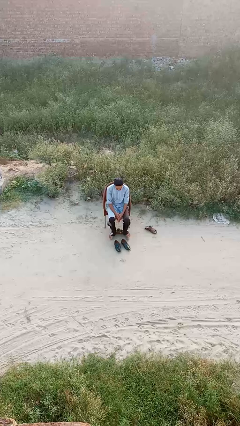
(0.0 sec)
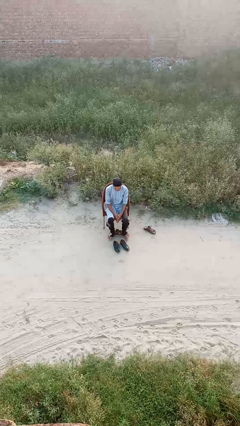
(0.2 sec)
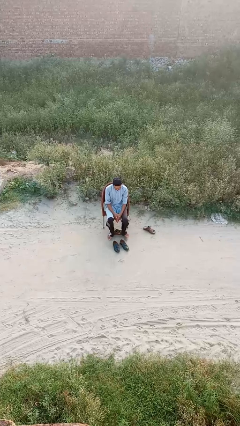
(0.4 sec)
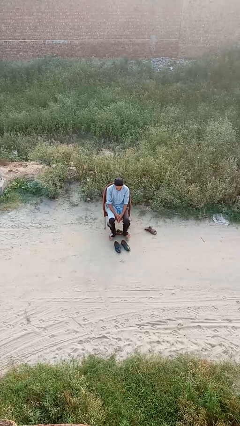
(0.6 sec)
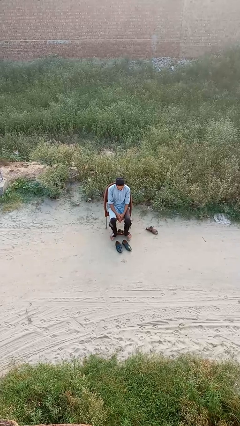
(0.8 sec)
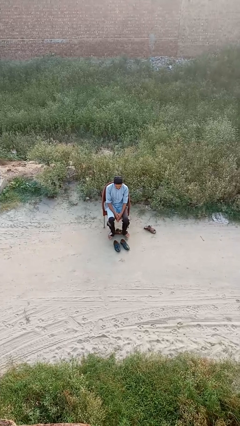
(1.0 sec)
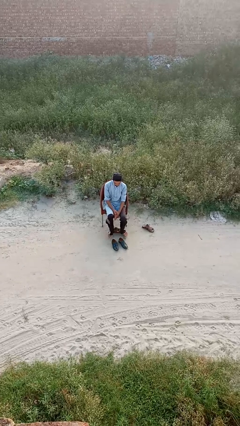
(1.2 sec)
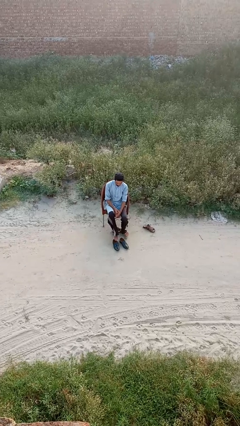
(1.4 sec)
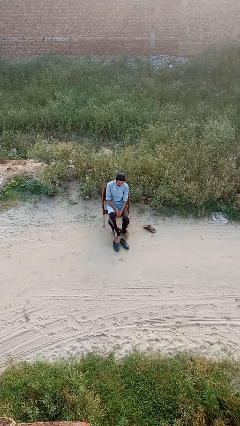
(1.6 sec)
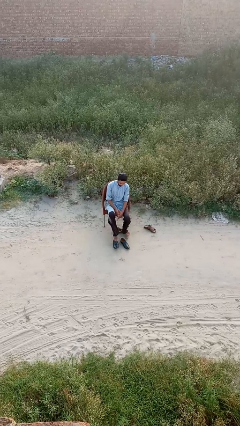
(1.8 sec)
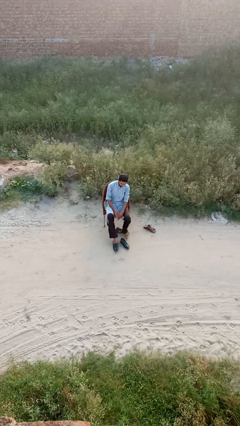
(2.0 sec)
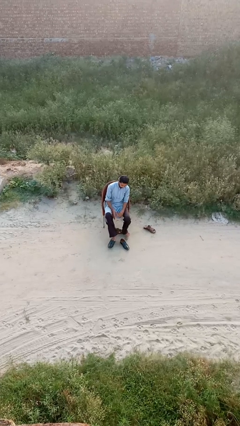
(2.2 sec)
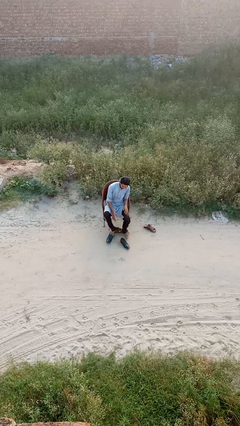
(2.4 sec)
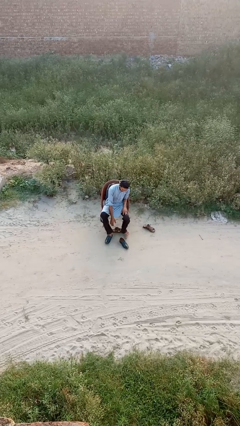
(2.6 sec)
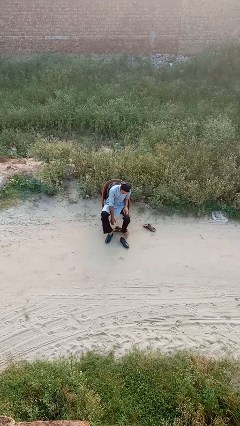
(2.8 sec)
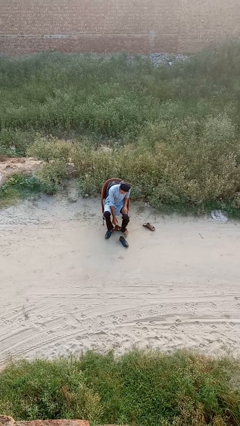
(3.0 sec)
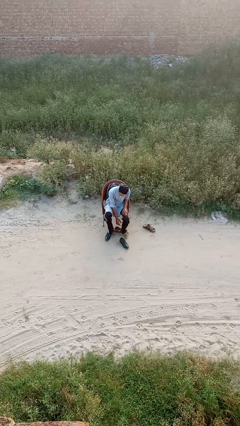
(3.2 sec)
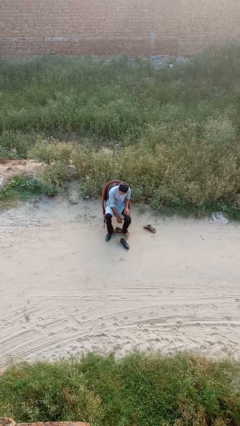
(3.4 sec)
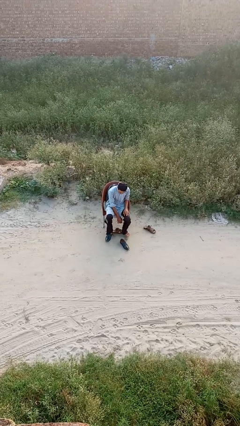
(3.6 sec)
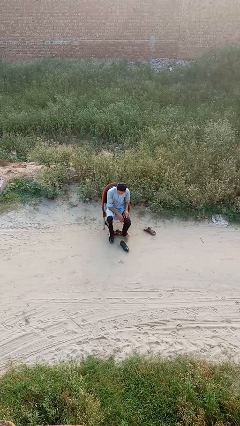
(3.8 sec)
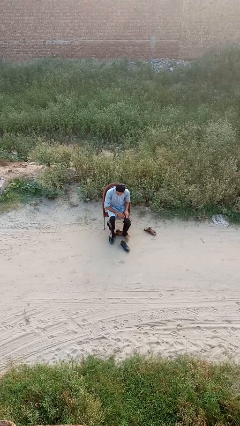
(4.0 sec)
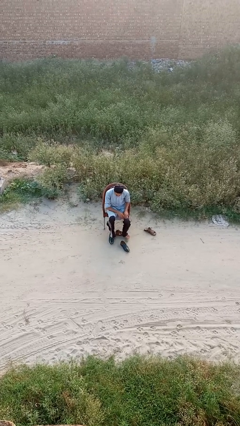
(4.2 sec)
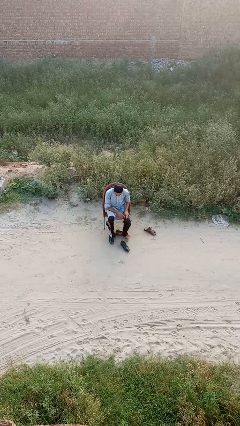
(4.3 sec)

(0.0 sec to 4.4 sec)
person puts on shoes

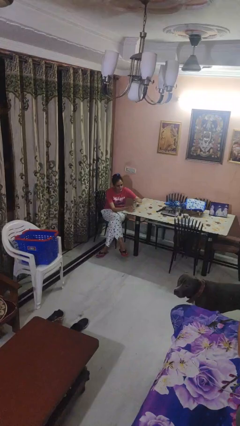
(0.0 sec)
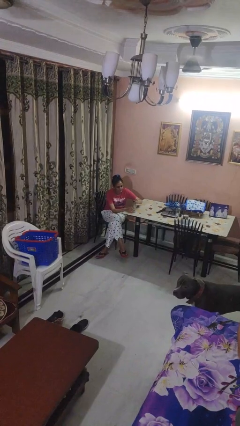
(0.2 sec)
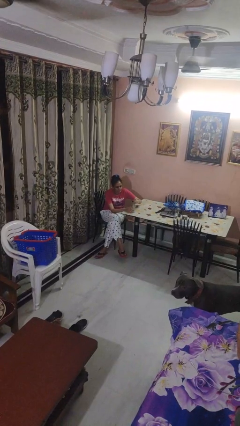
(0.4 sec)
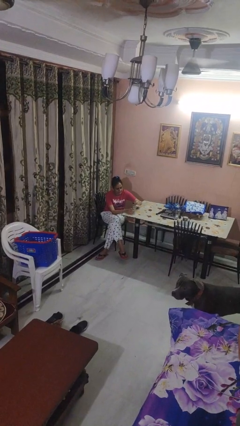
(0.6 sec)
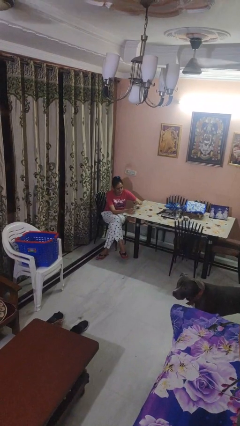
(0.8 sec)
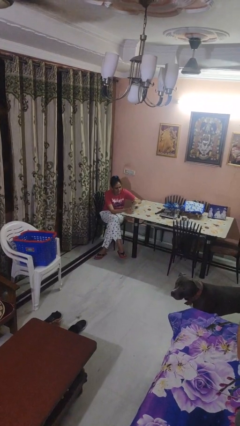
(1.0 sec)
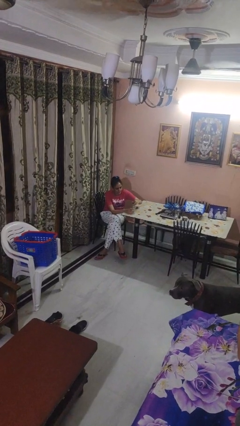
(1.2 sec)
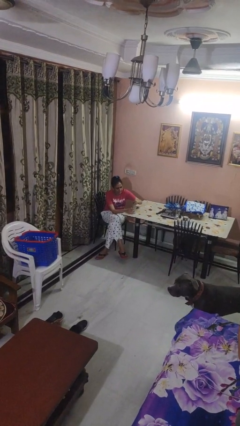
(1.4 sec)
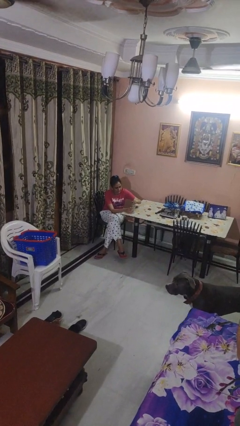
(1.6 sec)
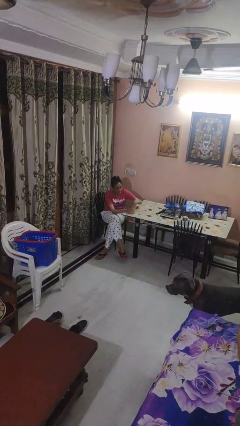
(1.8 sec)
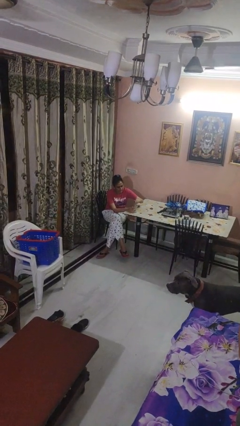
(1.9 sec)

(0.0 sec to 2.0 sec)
person screws lid to bottle

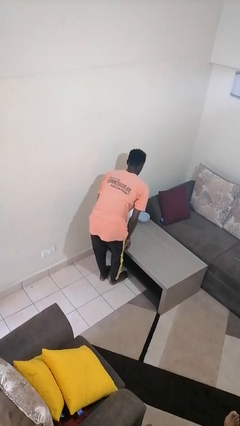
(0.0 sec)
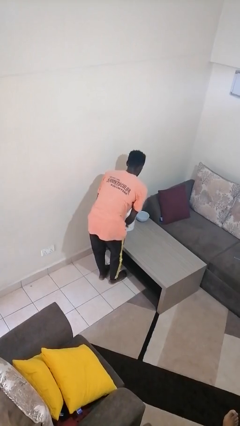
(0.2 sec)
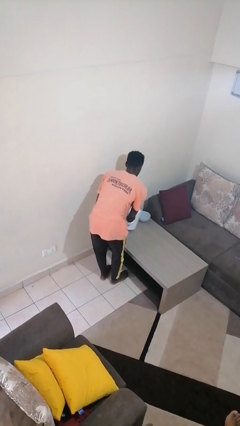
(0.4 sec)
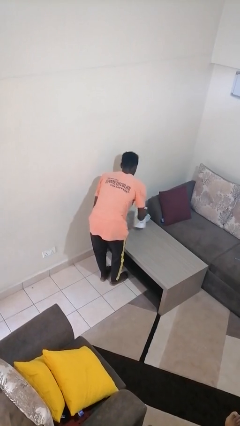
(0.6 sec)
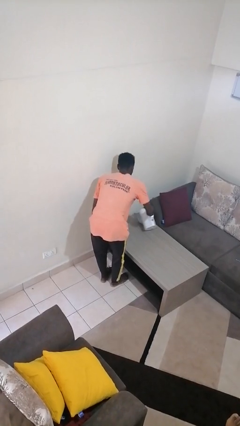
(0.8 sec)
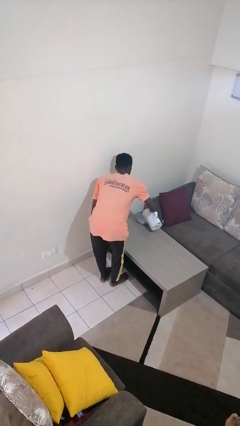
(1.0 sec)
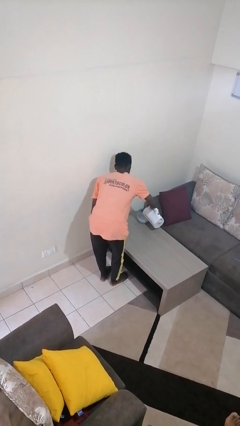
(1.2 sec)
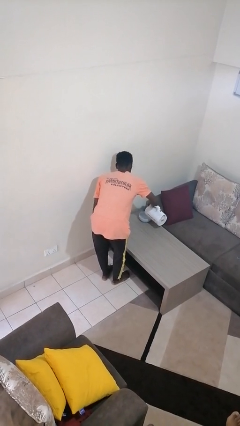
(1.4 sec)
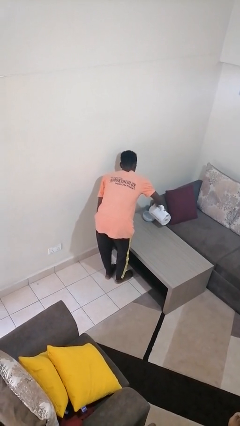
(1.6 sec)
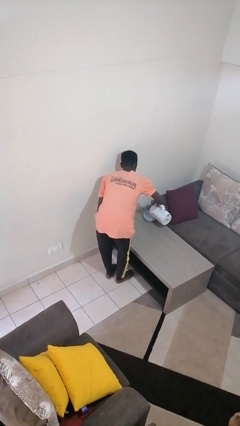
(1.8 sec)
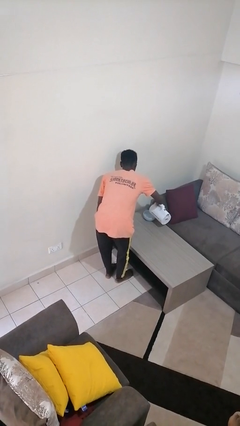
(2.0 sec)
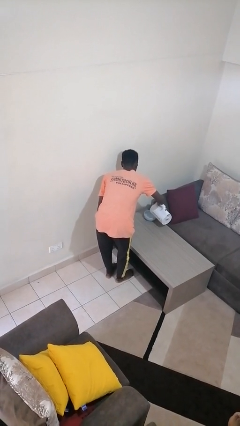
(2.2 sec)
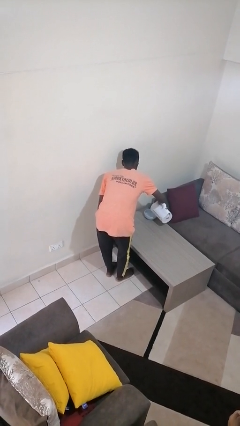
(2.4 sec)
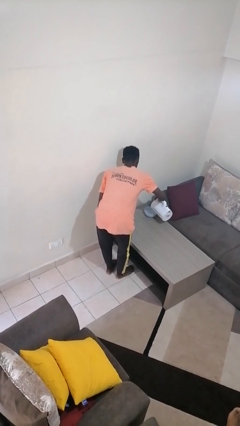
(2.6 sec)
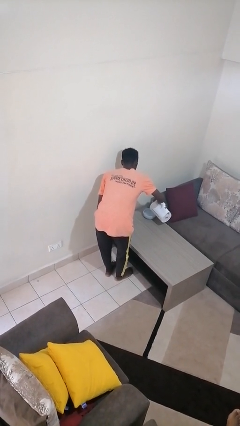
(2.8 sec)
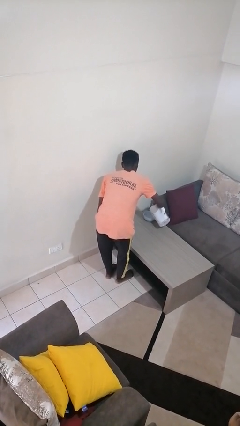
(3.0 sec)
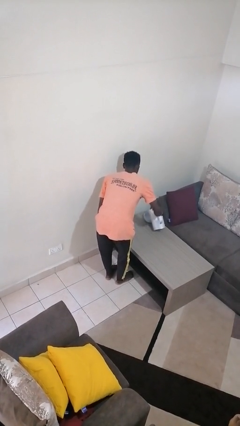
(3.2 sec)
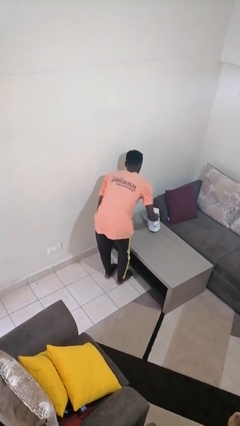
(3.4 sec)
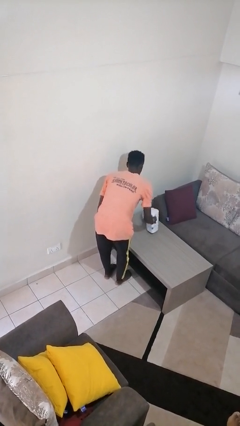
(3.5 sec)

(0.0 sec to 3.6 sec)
person pours into bowl

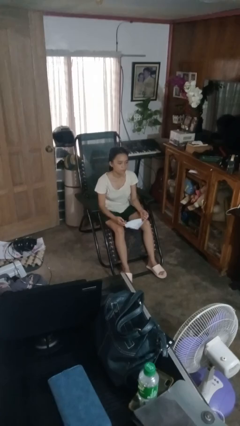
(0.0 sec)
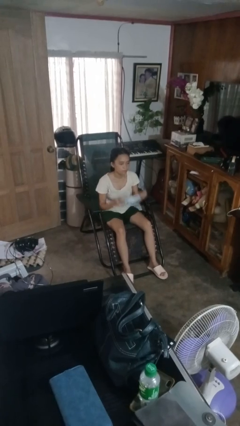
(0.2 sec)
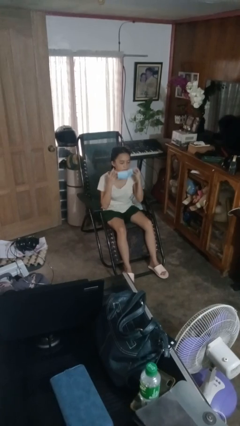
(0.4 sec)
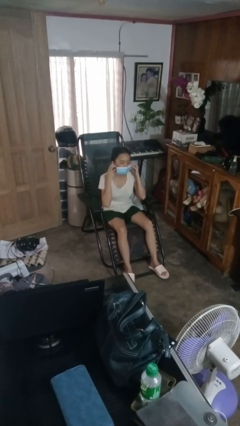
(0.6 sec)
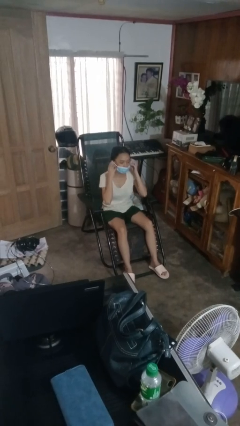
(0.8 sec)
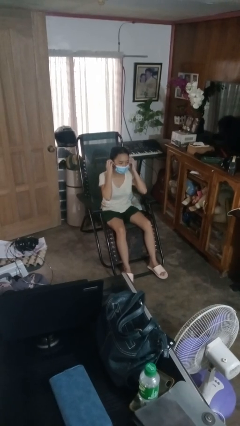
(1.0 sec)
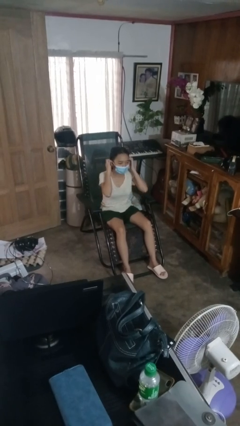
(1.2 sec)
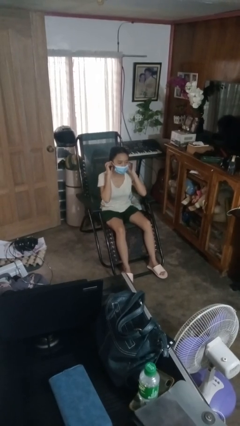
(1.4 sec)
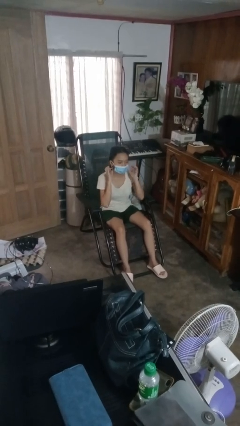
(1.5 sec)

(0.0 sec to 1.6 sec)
person puts on facemask

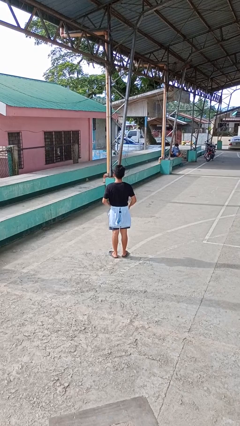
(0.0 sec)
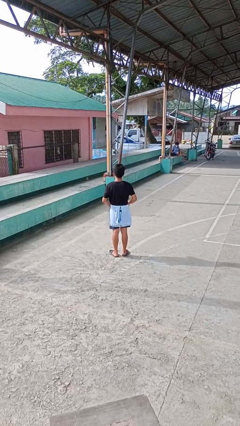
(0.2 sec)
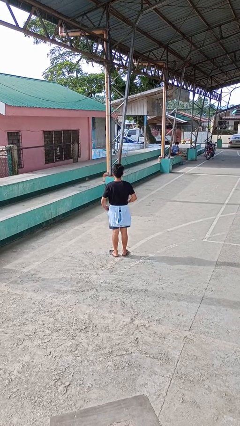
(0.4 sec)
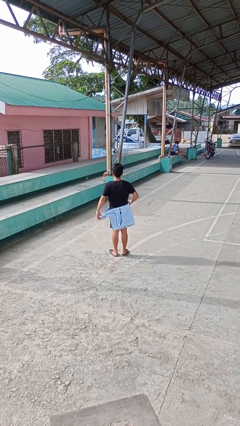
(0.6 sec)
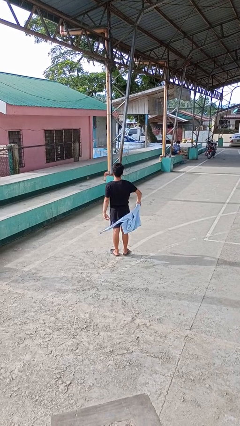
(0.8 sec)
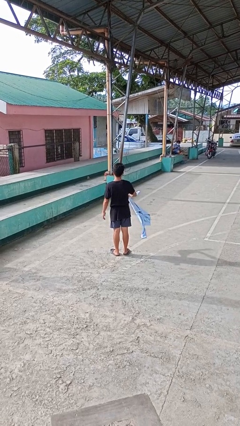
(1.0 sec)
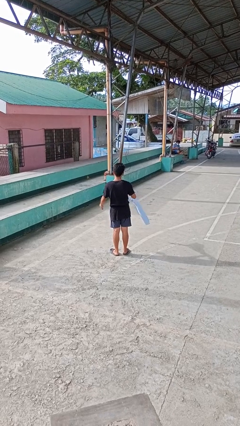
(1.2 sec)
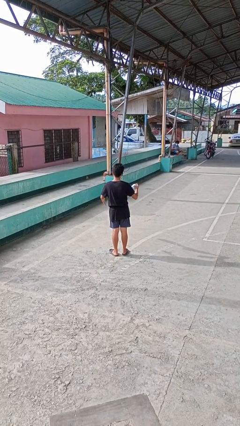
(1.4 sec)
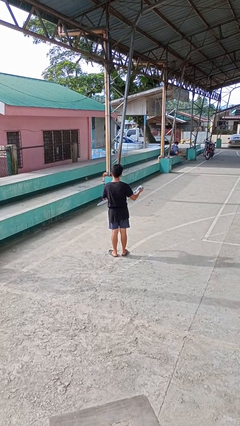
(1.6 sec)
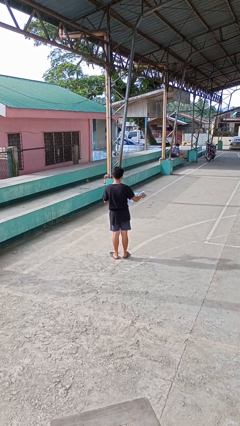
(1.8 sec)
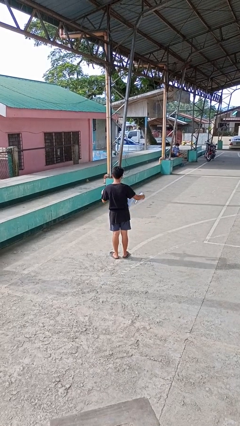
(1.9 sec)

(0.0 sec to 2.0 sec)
person unties jacket around waist

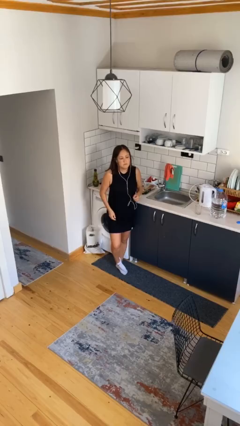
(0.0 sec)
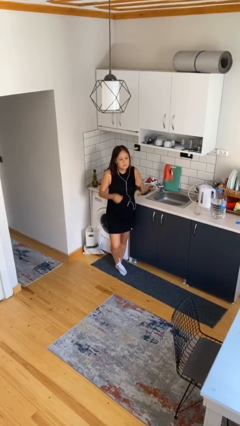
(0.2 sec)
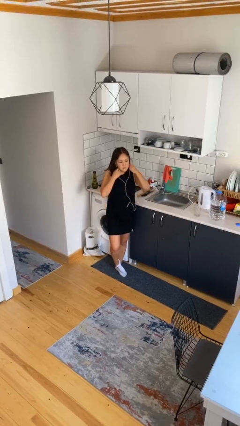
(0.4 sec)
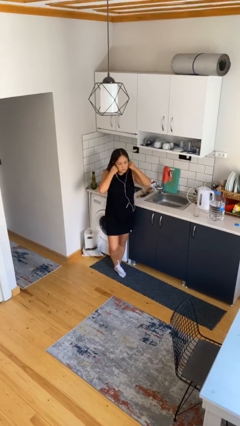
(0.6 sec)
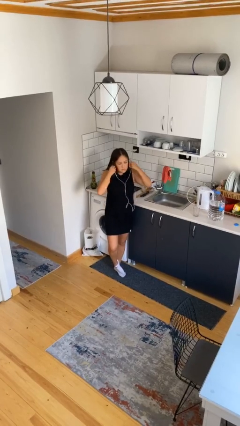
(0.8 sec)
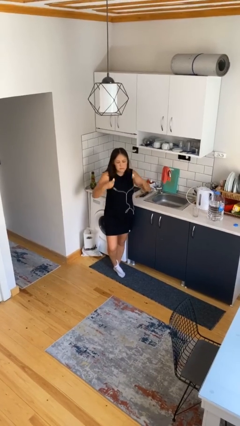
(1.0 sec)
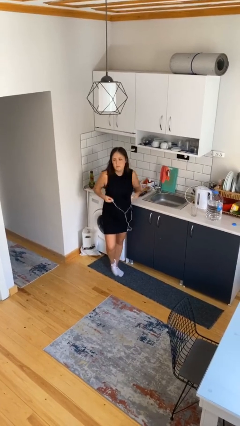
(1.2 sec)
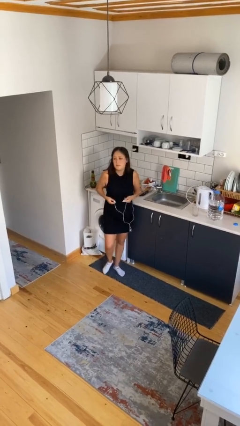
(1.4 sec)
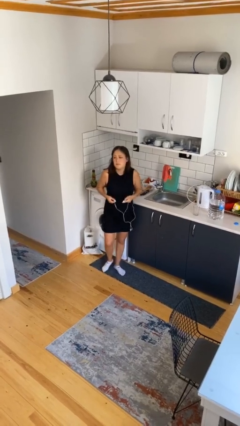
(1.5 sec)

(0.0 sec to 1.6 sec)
person takes off headphones

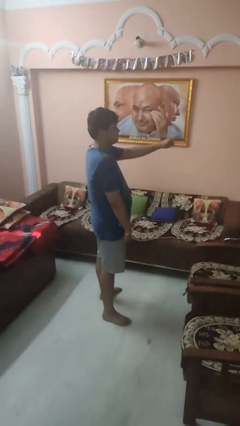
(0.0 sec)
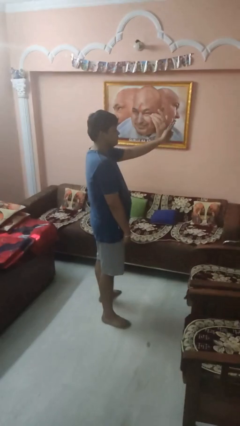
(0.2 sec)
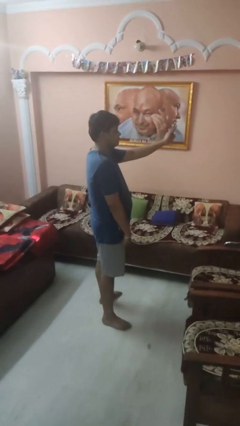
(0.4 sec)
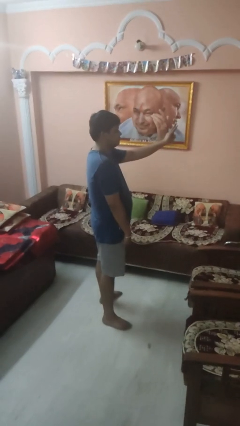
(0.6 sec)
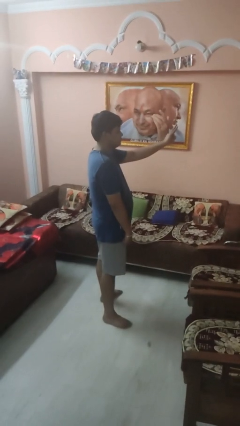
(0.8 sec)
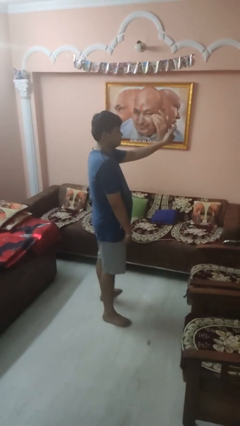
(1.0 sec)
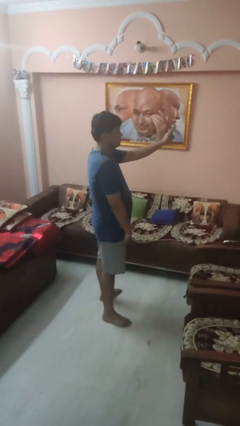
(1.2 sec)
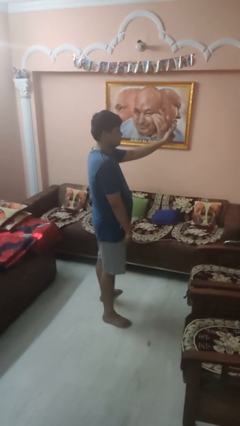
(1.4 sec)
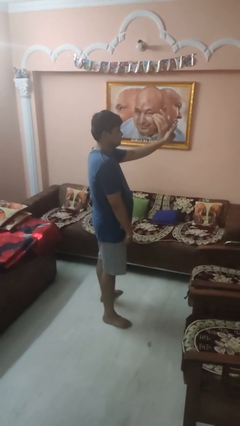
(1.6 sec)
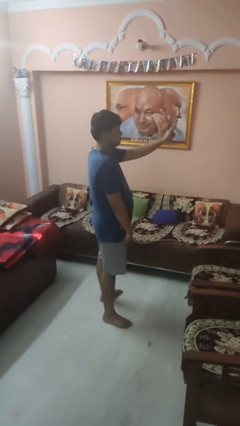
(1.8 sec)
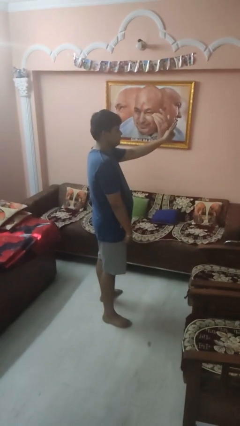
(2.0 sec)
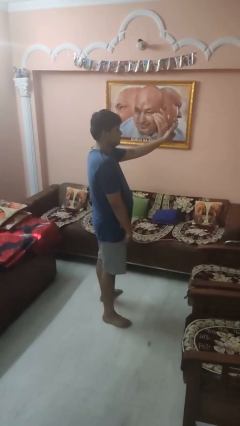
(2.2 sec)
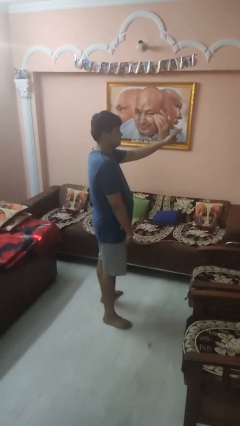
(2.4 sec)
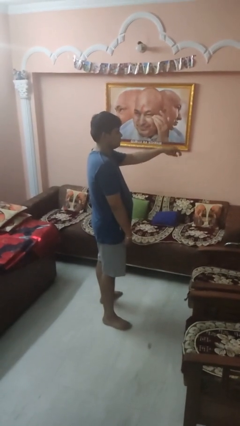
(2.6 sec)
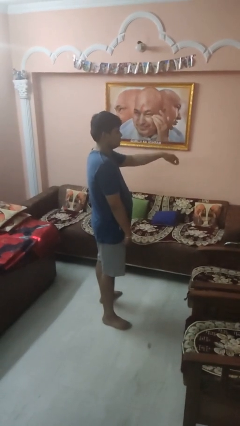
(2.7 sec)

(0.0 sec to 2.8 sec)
person gestures peace
